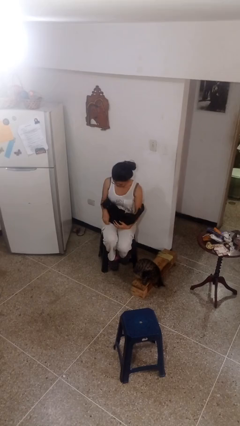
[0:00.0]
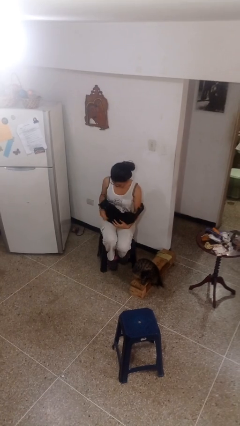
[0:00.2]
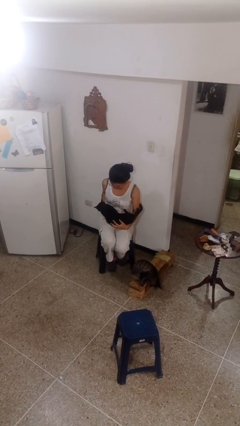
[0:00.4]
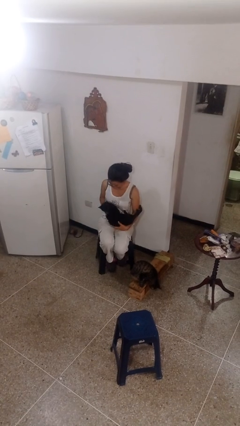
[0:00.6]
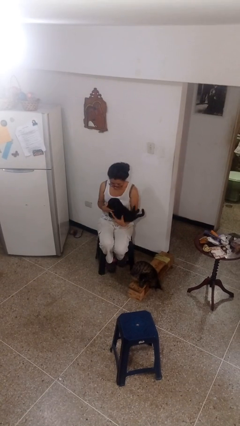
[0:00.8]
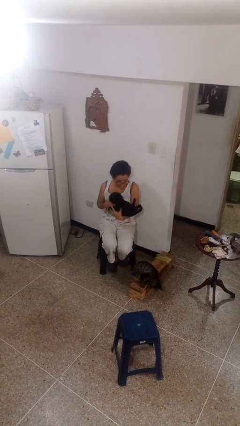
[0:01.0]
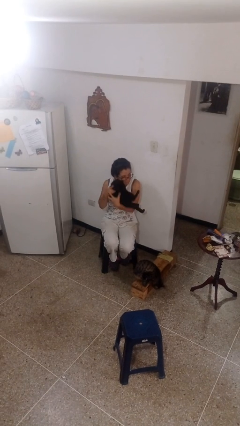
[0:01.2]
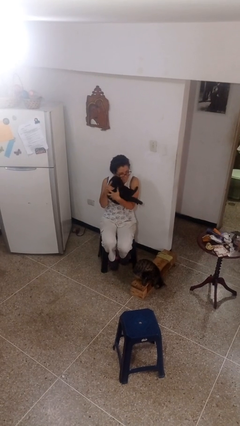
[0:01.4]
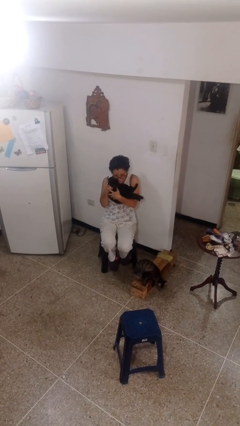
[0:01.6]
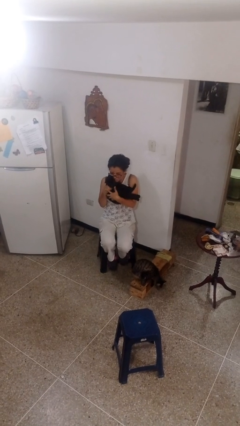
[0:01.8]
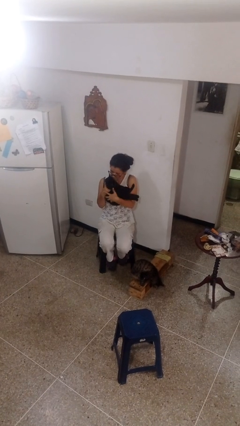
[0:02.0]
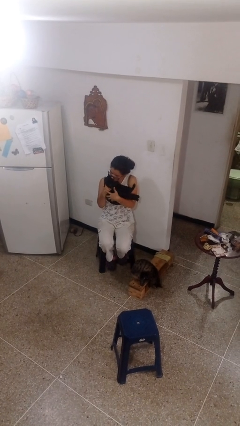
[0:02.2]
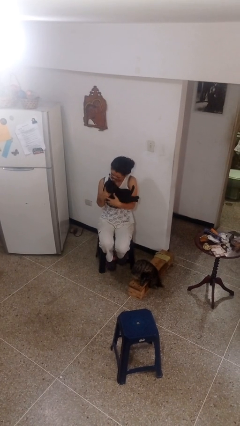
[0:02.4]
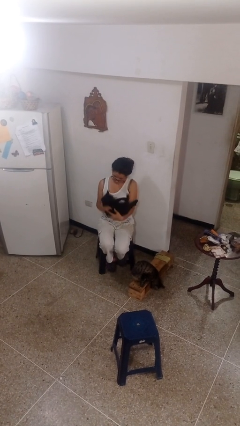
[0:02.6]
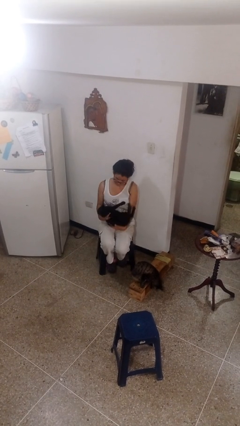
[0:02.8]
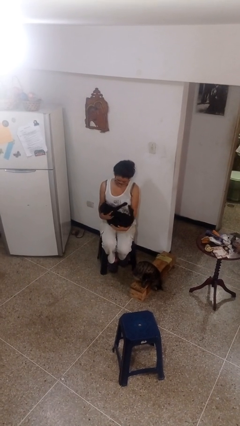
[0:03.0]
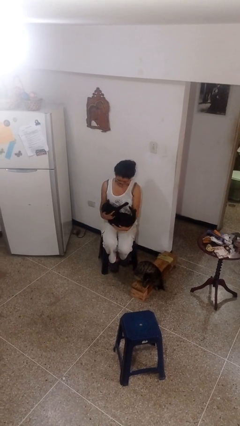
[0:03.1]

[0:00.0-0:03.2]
person hugs cat

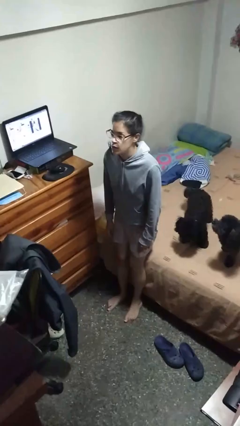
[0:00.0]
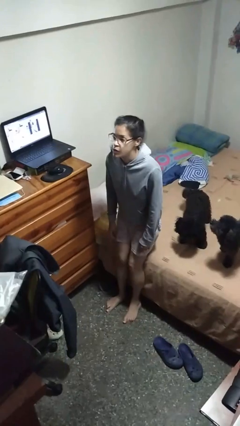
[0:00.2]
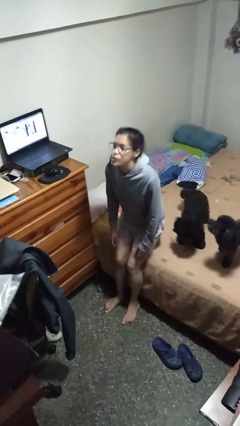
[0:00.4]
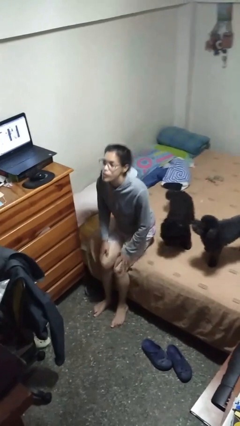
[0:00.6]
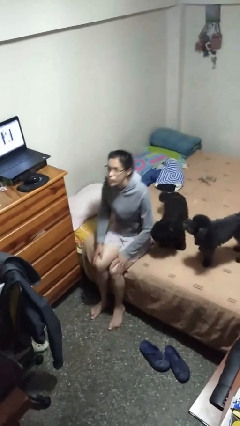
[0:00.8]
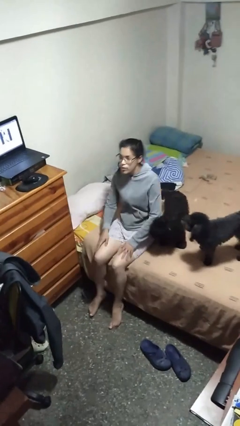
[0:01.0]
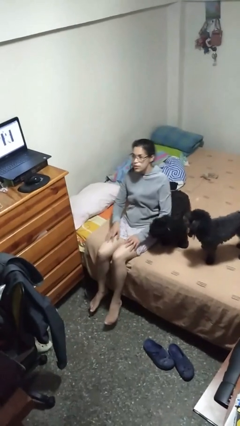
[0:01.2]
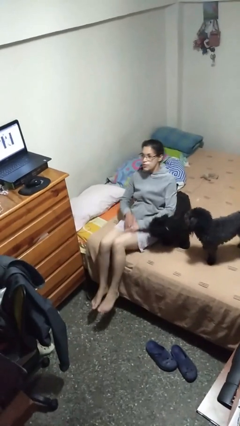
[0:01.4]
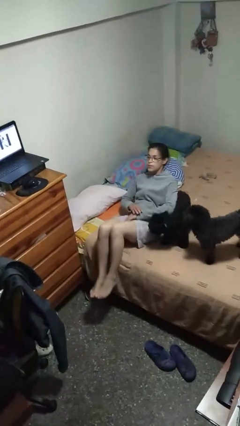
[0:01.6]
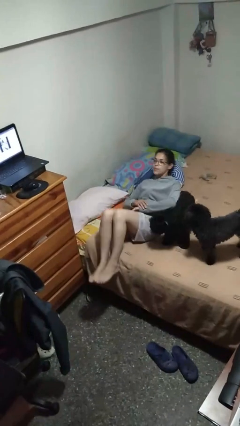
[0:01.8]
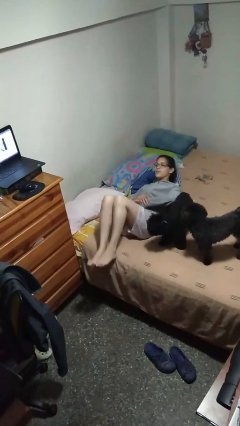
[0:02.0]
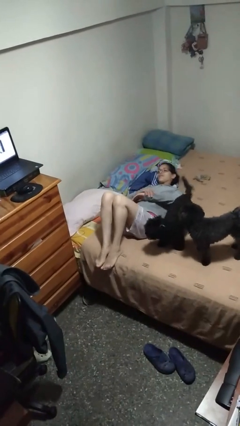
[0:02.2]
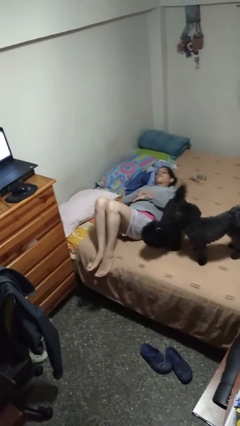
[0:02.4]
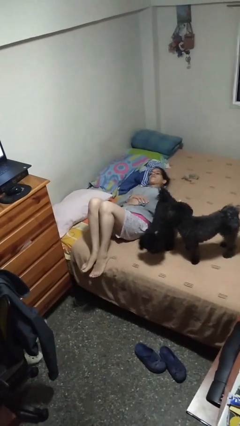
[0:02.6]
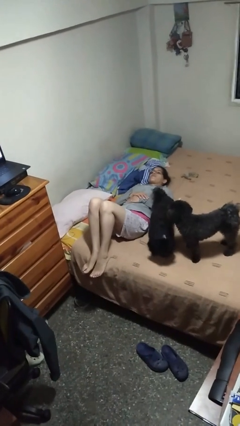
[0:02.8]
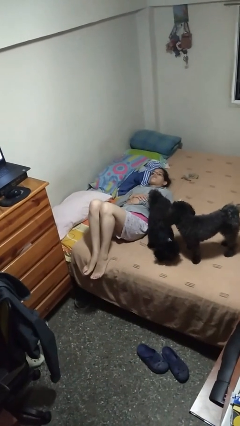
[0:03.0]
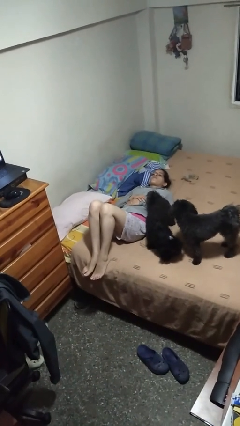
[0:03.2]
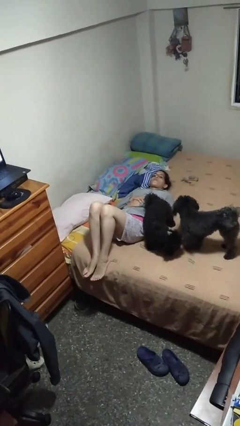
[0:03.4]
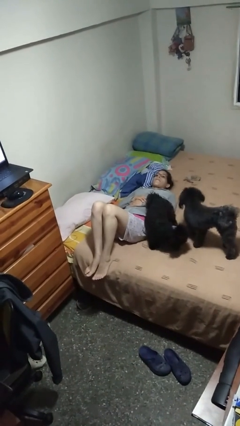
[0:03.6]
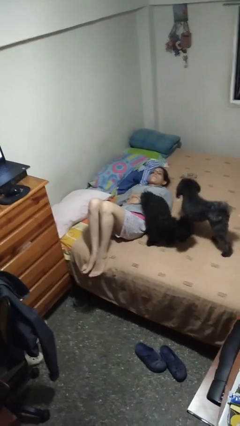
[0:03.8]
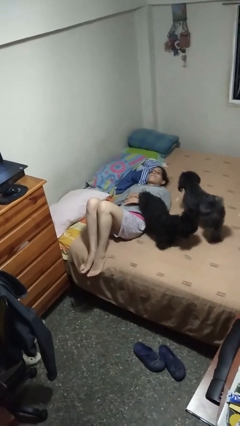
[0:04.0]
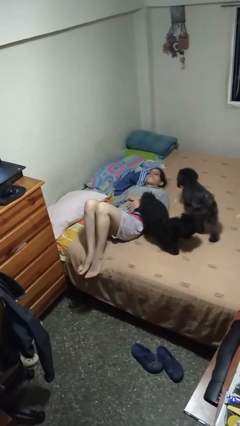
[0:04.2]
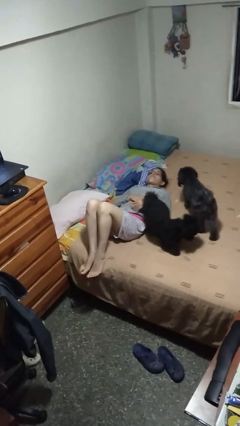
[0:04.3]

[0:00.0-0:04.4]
person lies down on bed

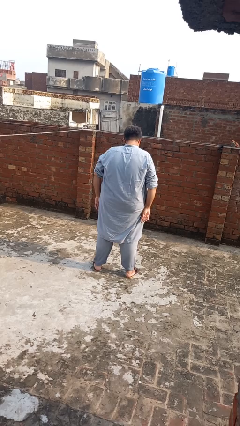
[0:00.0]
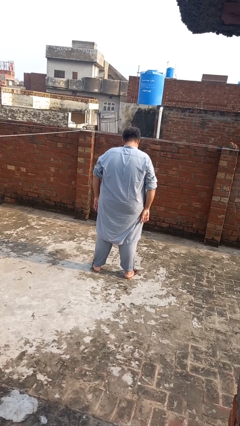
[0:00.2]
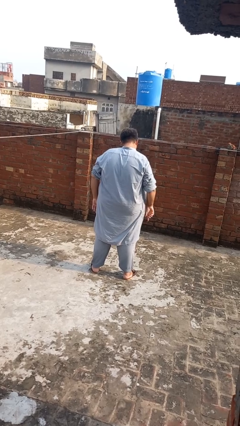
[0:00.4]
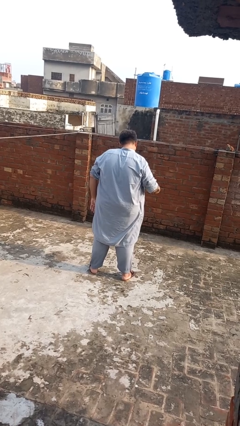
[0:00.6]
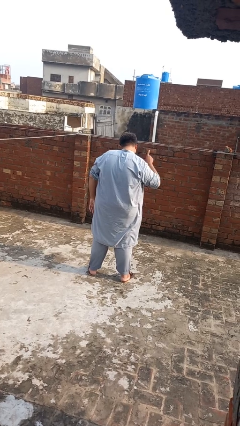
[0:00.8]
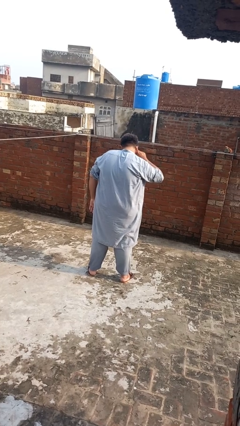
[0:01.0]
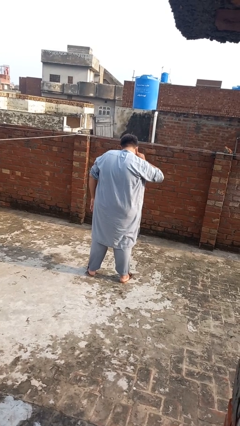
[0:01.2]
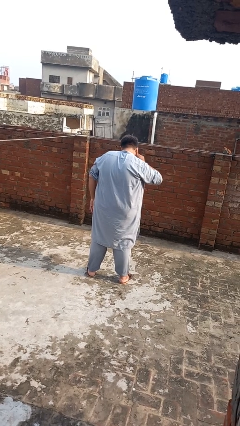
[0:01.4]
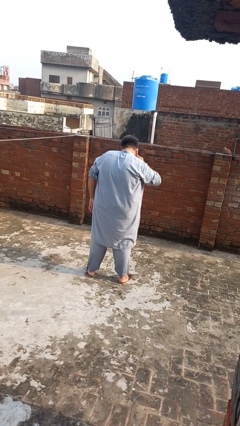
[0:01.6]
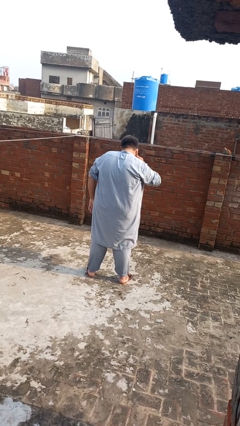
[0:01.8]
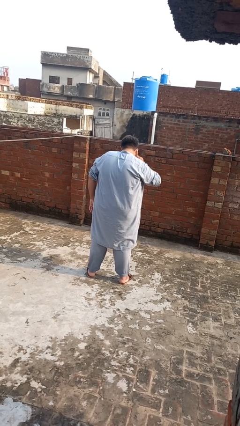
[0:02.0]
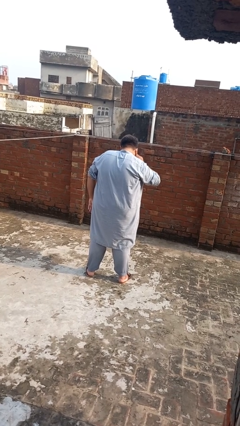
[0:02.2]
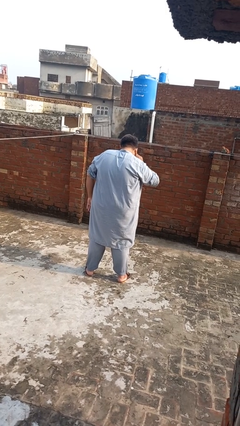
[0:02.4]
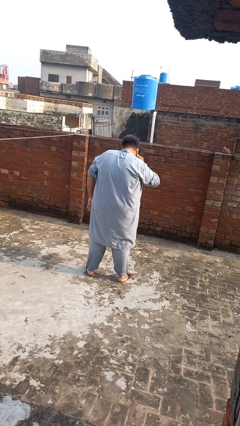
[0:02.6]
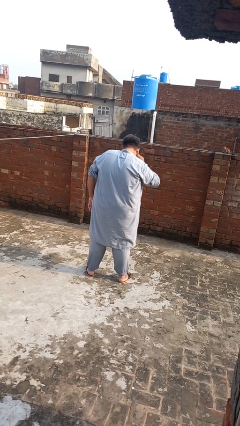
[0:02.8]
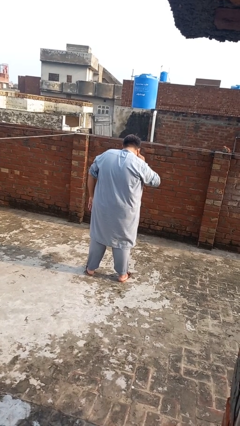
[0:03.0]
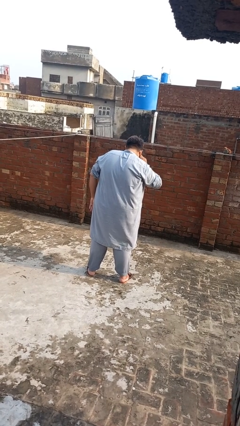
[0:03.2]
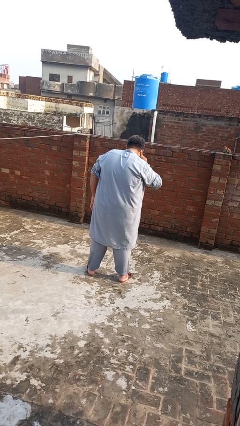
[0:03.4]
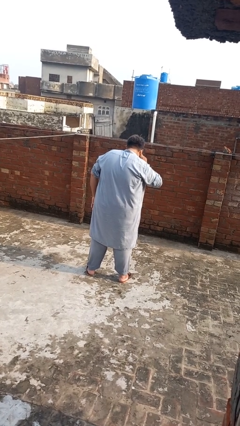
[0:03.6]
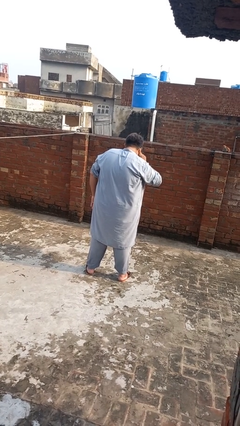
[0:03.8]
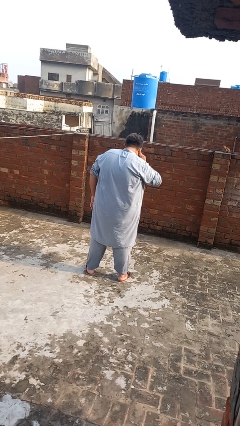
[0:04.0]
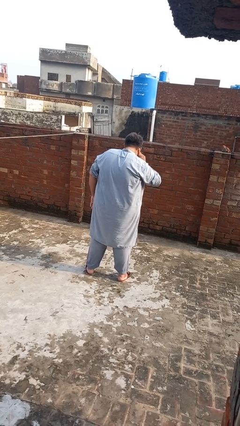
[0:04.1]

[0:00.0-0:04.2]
person gestures listen closely

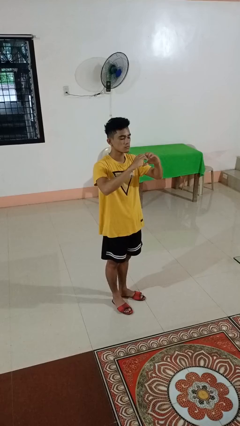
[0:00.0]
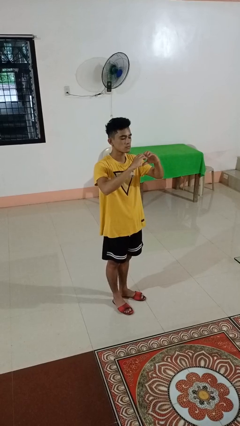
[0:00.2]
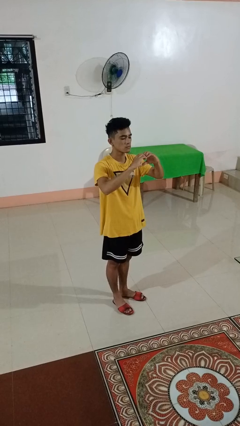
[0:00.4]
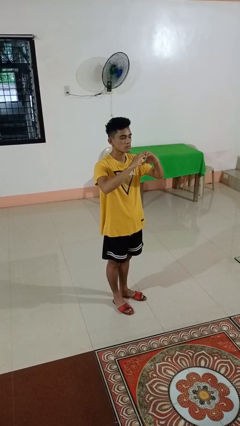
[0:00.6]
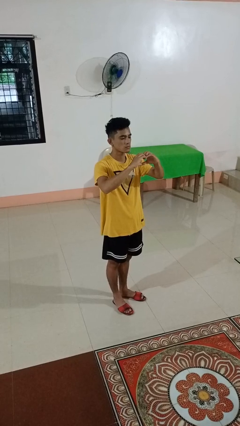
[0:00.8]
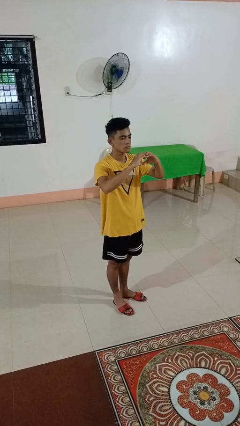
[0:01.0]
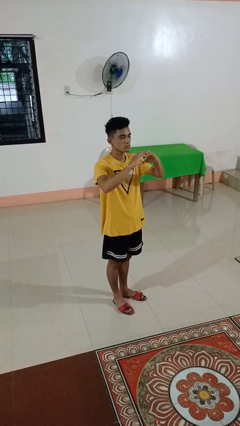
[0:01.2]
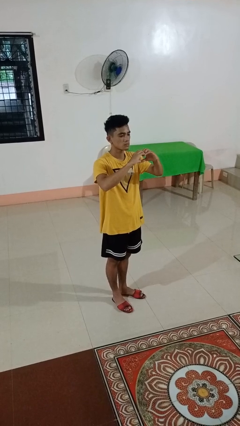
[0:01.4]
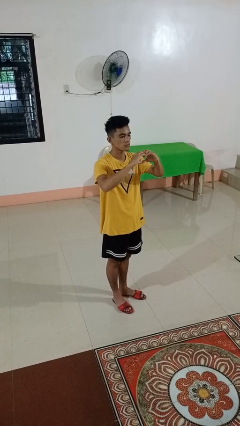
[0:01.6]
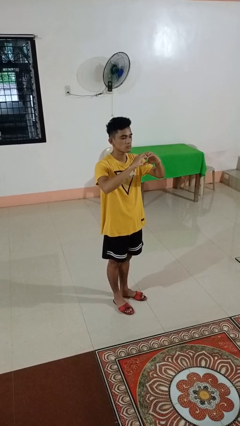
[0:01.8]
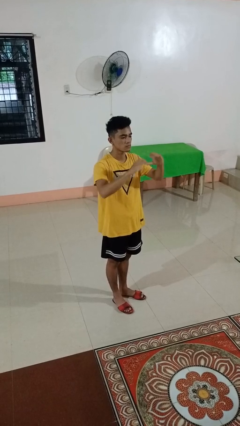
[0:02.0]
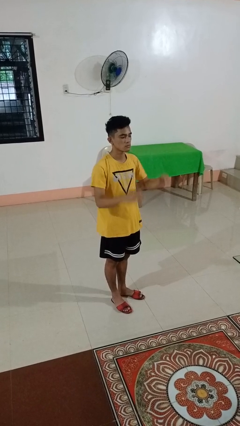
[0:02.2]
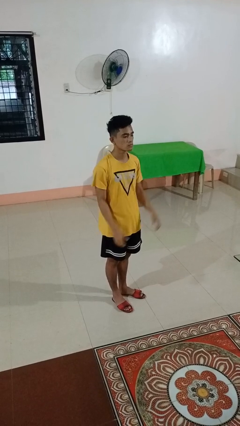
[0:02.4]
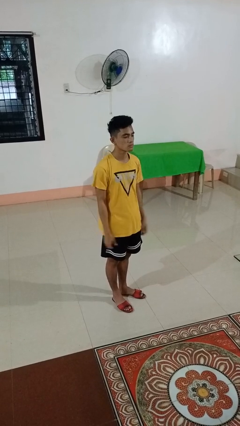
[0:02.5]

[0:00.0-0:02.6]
person gestures heart

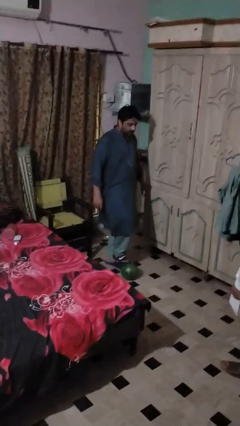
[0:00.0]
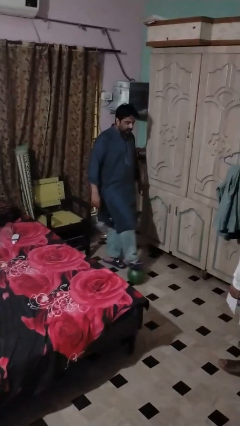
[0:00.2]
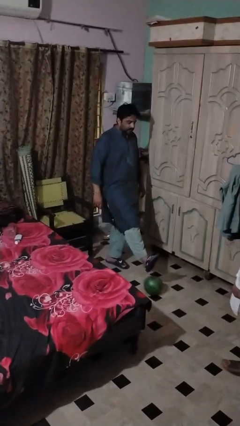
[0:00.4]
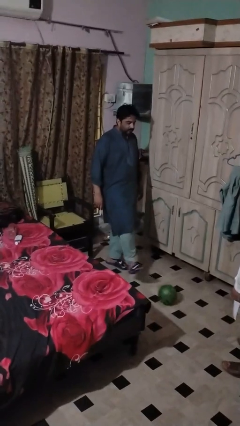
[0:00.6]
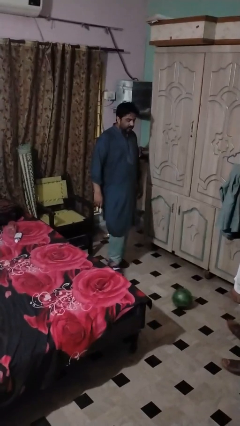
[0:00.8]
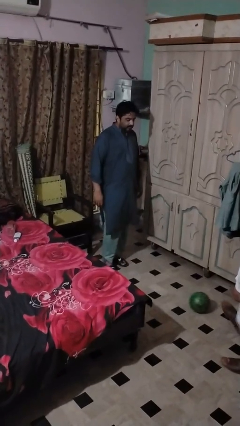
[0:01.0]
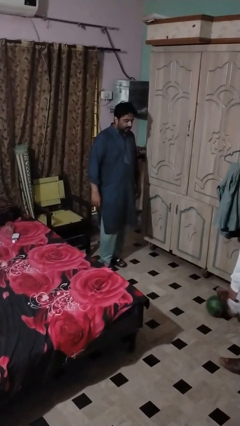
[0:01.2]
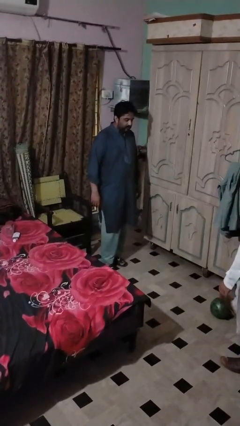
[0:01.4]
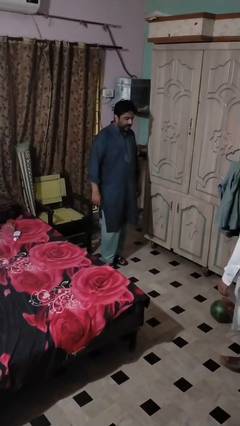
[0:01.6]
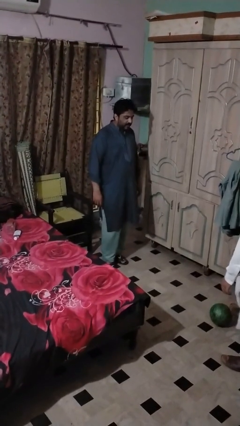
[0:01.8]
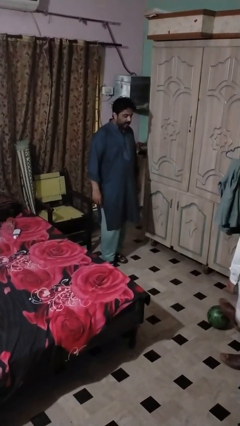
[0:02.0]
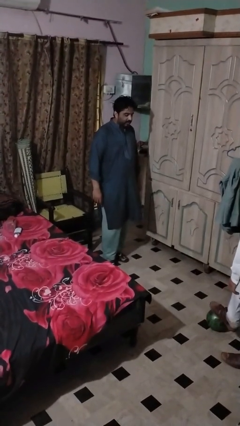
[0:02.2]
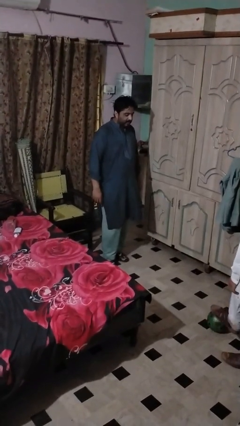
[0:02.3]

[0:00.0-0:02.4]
person kicks object to person

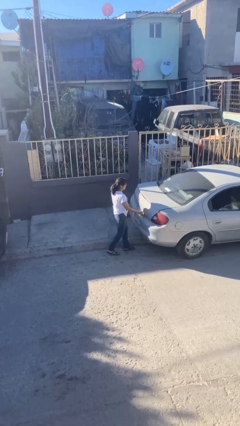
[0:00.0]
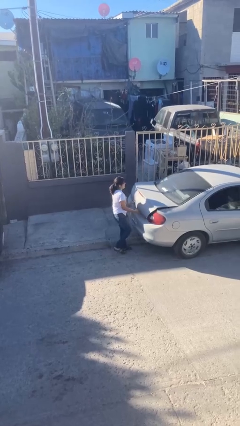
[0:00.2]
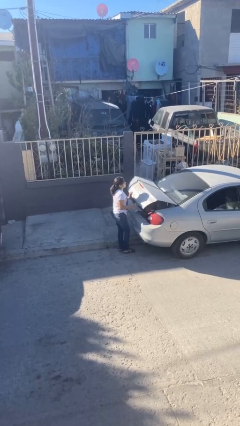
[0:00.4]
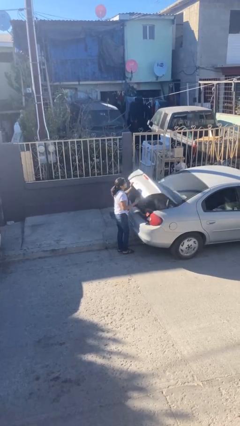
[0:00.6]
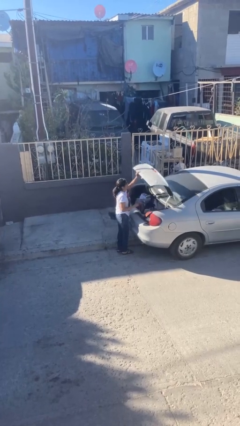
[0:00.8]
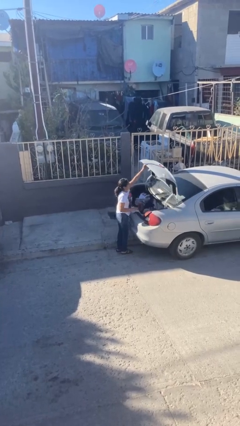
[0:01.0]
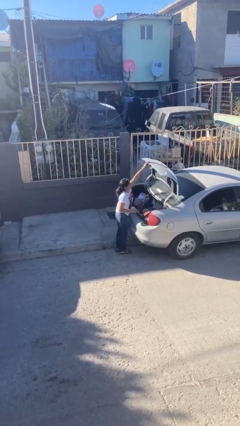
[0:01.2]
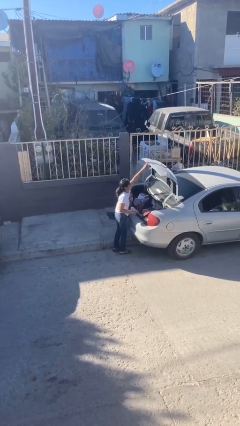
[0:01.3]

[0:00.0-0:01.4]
person opens car trunk
